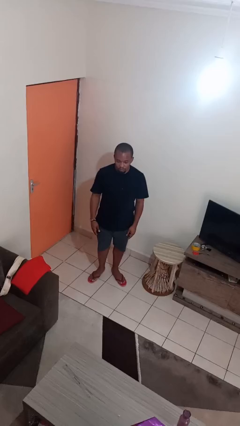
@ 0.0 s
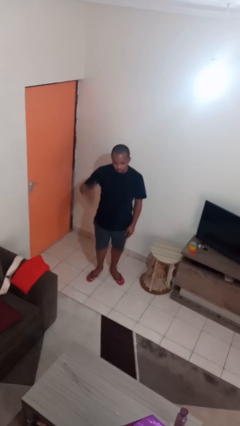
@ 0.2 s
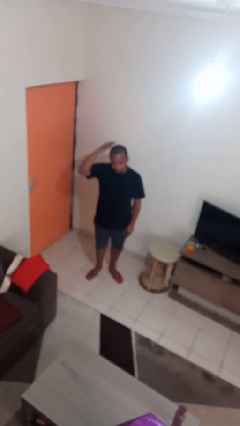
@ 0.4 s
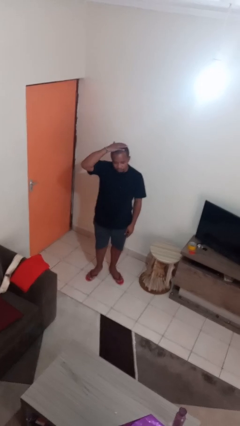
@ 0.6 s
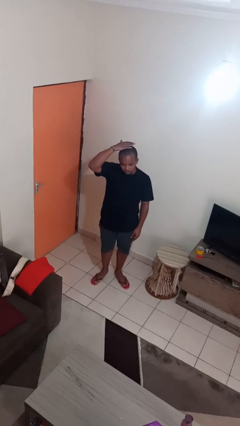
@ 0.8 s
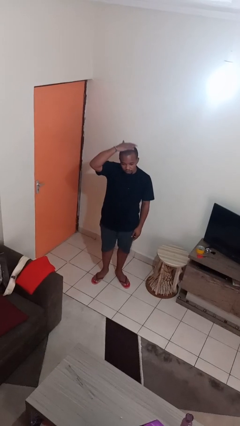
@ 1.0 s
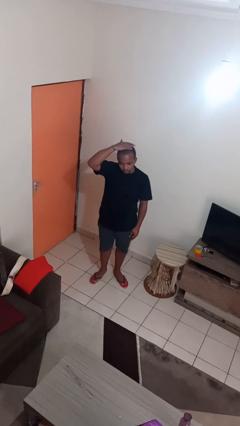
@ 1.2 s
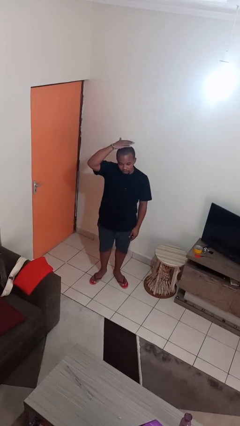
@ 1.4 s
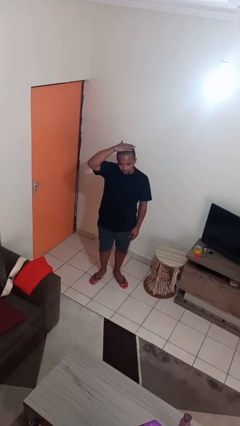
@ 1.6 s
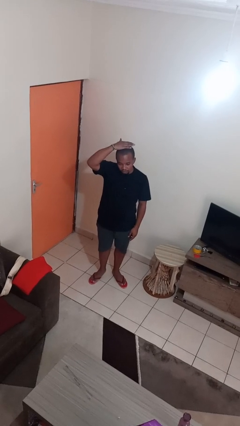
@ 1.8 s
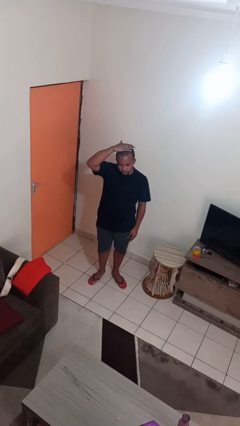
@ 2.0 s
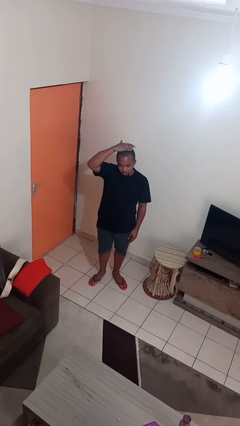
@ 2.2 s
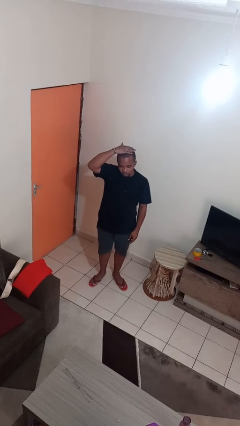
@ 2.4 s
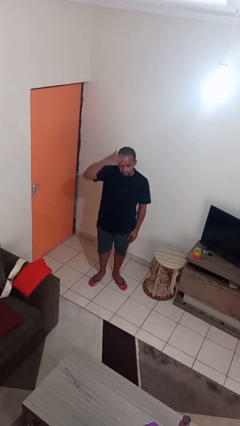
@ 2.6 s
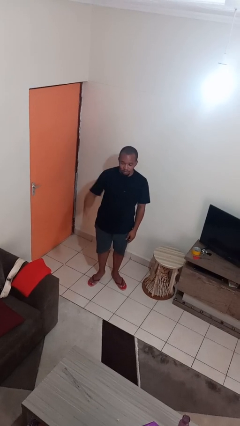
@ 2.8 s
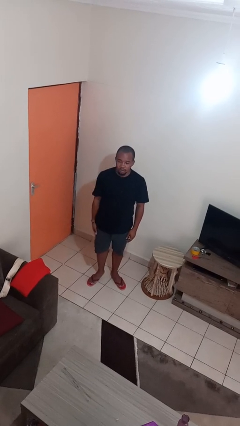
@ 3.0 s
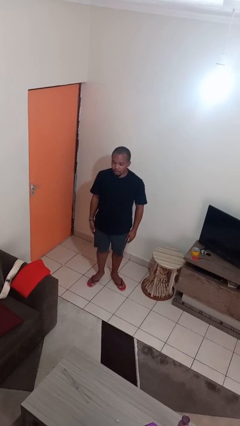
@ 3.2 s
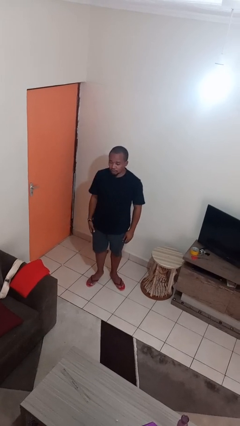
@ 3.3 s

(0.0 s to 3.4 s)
person pats head

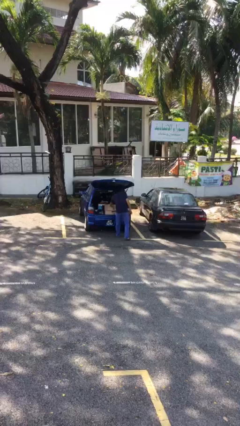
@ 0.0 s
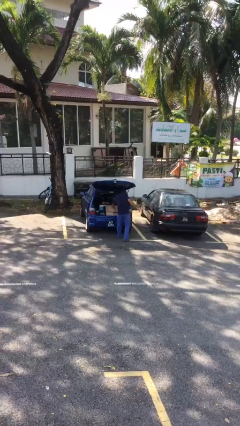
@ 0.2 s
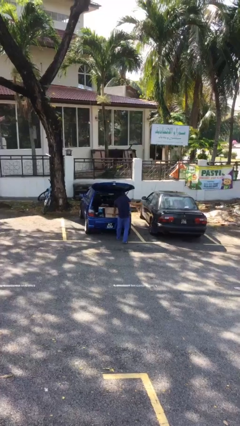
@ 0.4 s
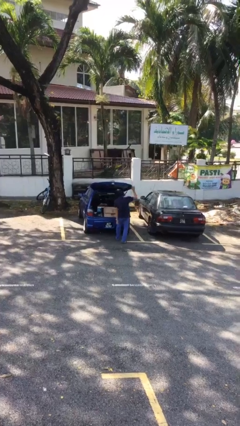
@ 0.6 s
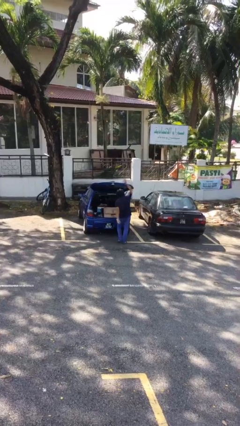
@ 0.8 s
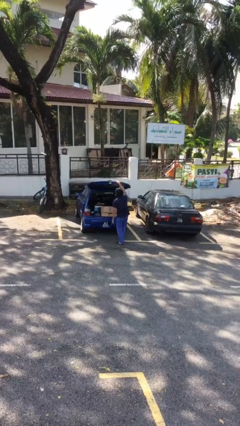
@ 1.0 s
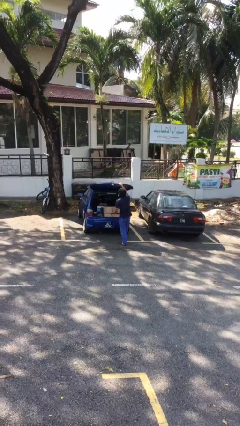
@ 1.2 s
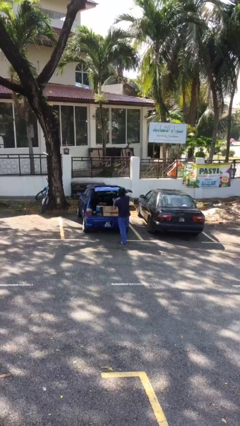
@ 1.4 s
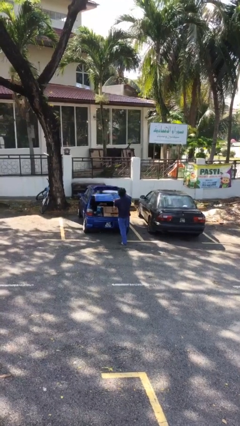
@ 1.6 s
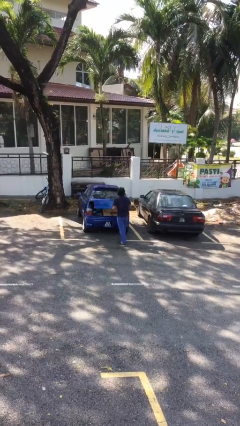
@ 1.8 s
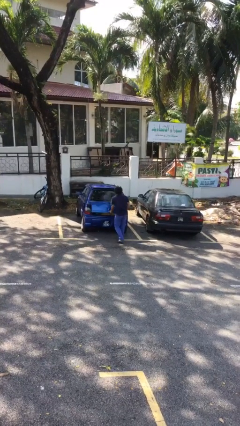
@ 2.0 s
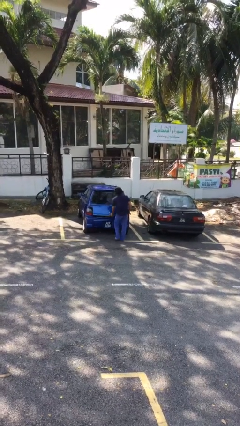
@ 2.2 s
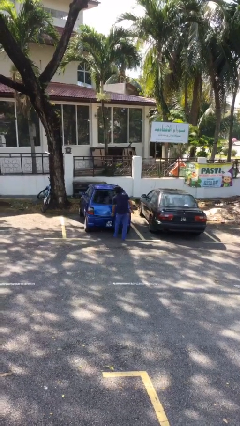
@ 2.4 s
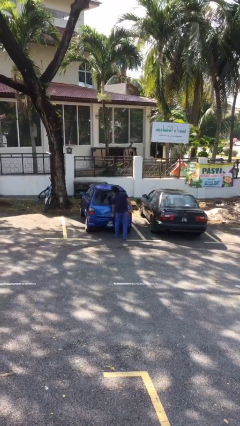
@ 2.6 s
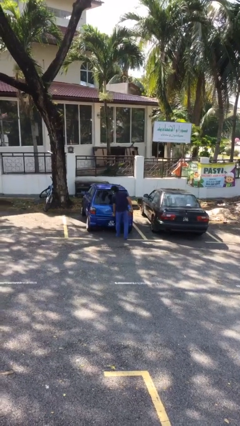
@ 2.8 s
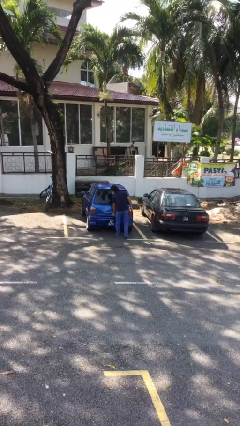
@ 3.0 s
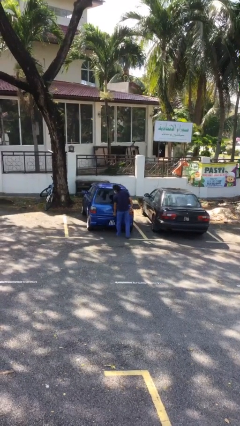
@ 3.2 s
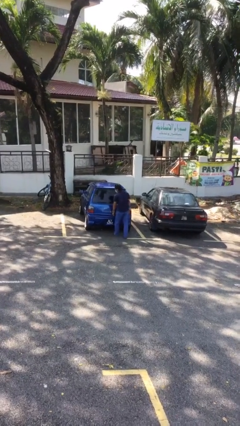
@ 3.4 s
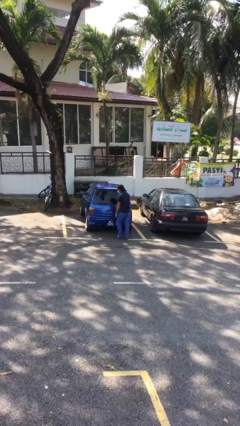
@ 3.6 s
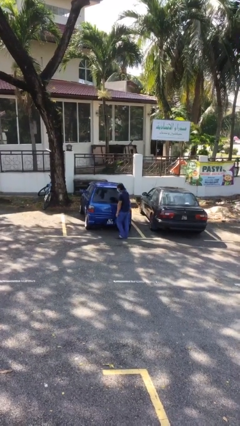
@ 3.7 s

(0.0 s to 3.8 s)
person closes car trunk

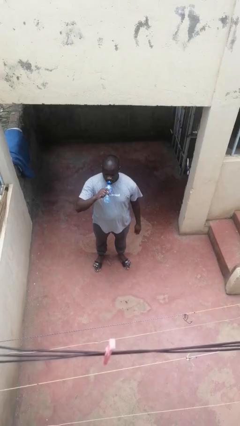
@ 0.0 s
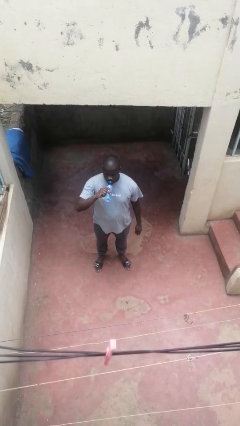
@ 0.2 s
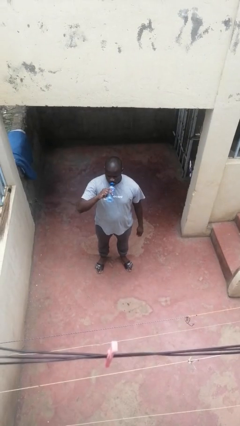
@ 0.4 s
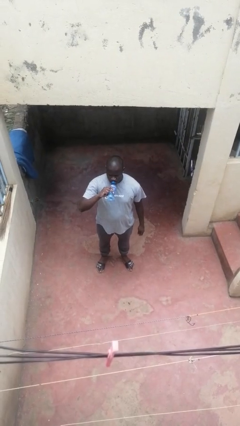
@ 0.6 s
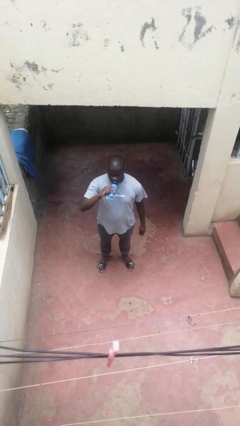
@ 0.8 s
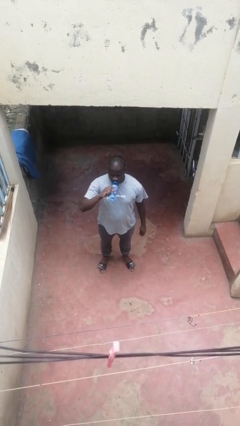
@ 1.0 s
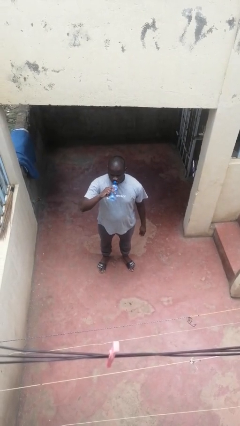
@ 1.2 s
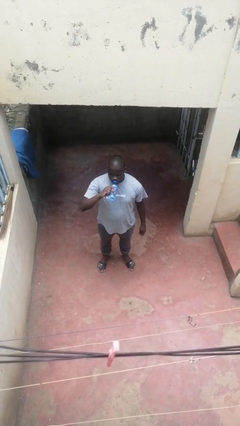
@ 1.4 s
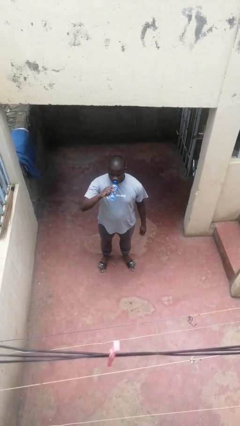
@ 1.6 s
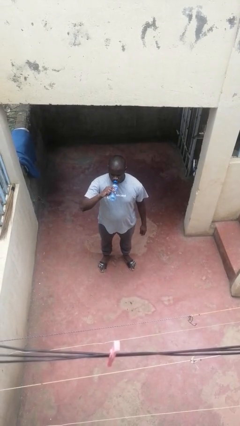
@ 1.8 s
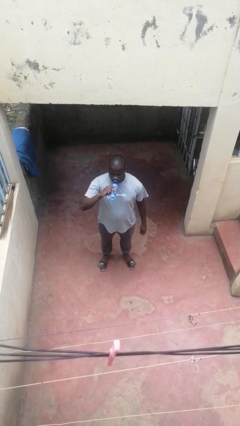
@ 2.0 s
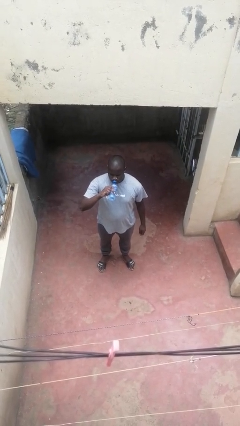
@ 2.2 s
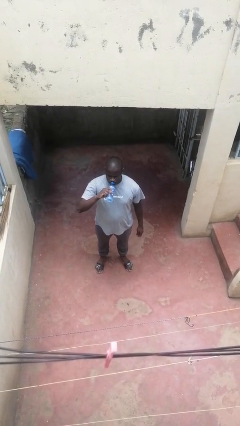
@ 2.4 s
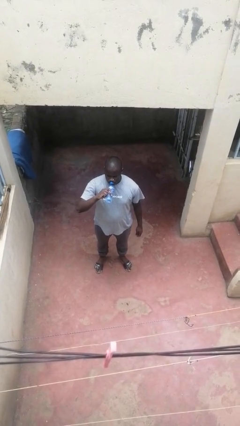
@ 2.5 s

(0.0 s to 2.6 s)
person drinks from bottle

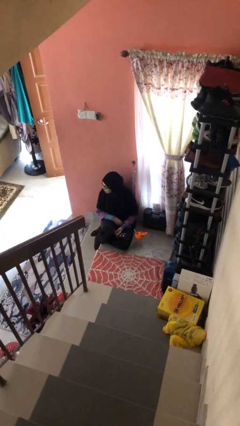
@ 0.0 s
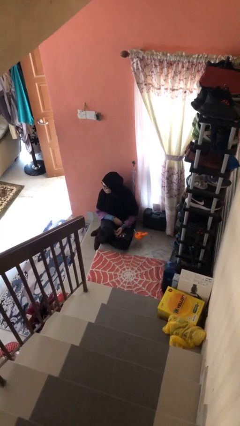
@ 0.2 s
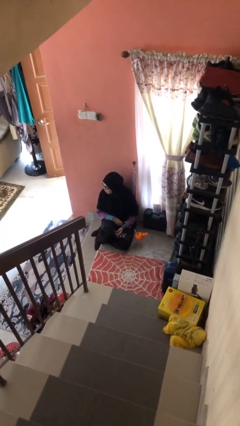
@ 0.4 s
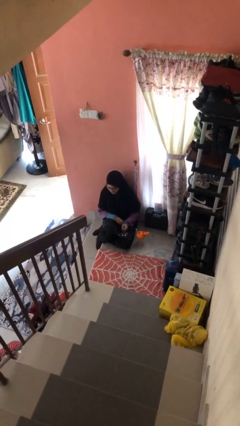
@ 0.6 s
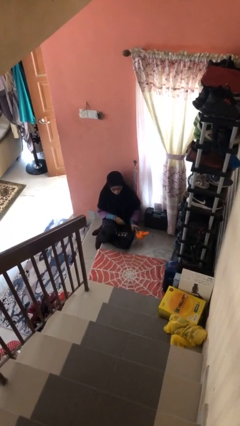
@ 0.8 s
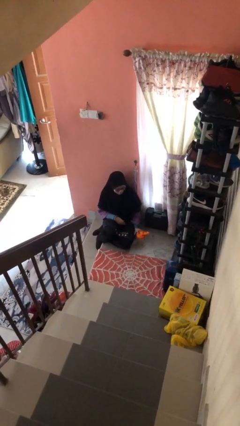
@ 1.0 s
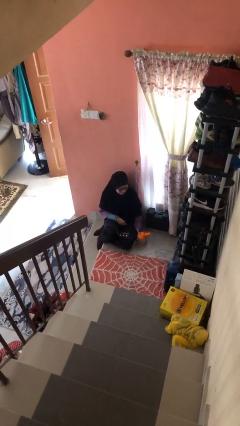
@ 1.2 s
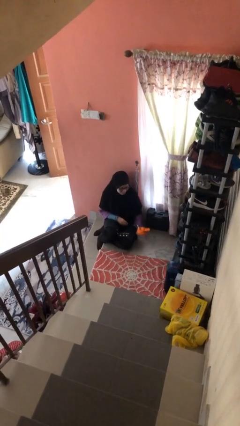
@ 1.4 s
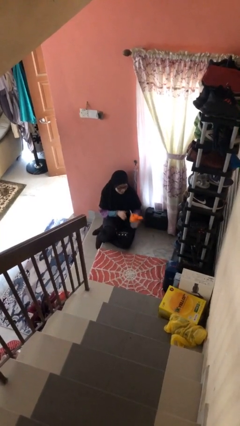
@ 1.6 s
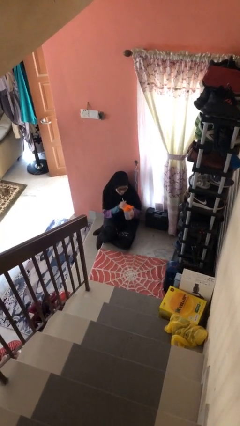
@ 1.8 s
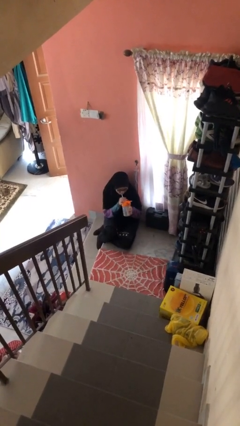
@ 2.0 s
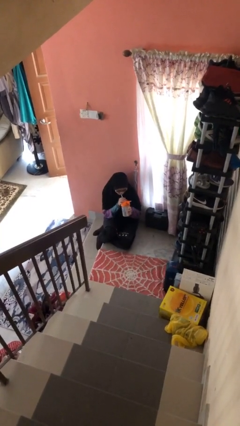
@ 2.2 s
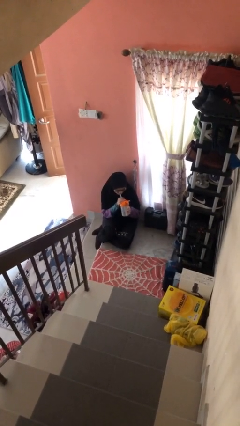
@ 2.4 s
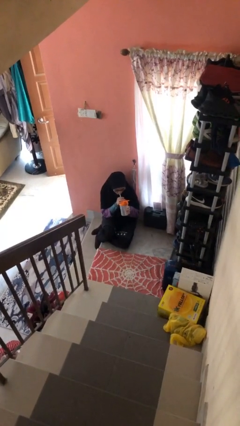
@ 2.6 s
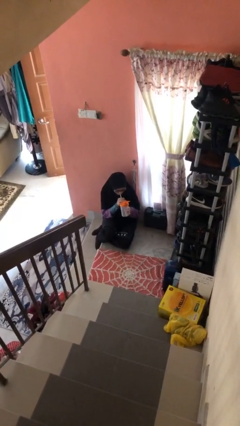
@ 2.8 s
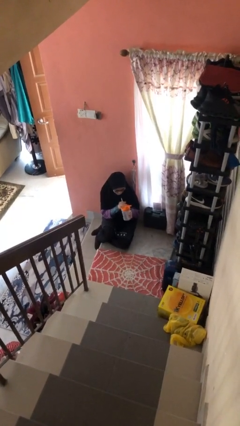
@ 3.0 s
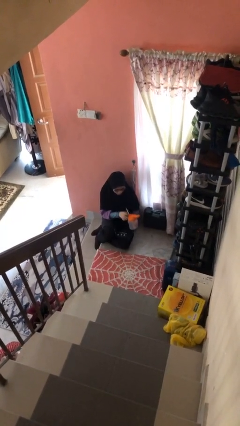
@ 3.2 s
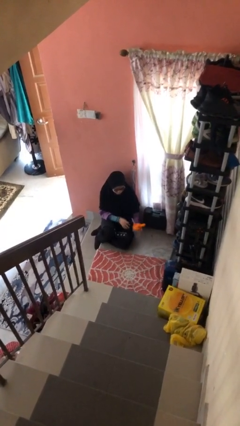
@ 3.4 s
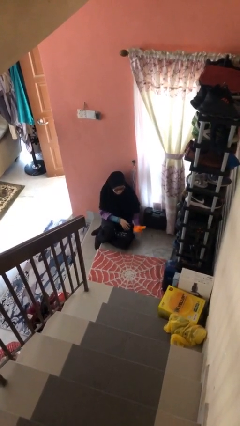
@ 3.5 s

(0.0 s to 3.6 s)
person drinks from straw

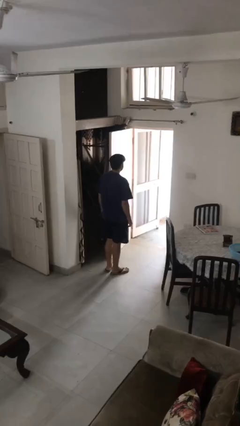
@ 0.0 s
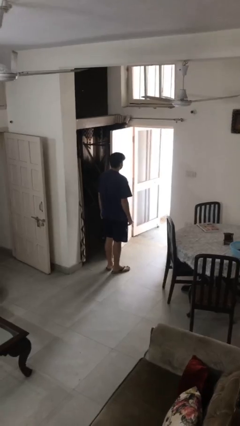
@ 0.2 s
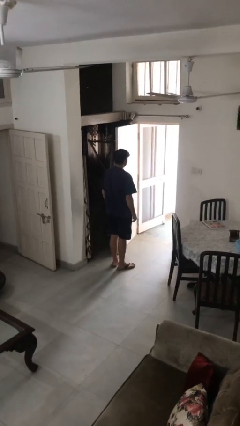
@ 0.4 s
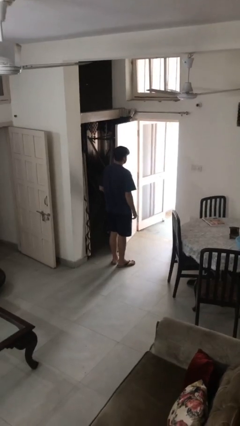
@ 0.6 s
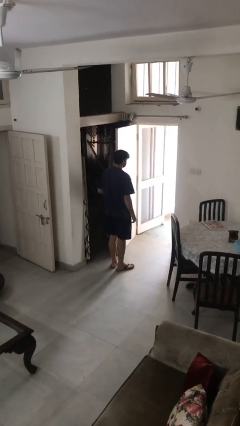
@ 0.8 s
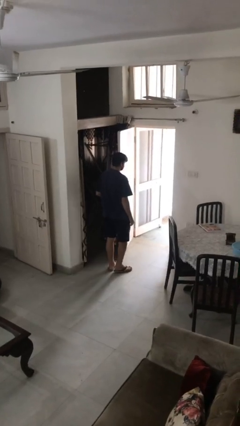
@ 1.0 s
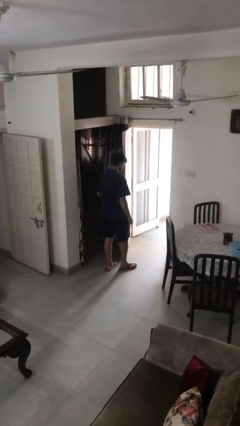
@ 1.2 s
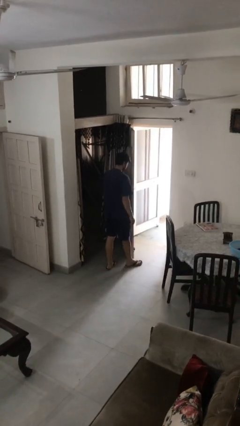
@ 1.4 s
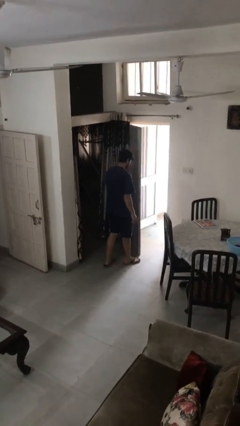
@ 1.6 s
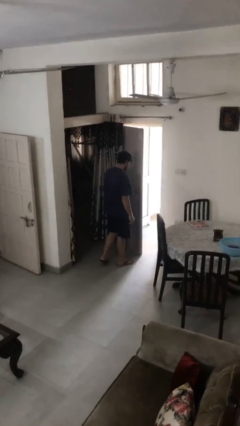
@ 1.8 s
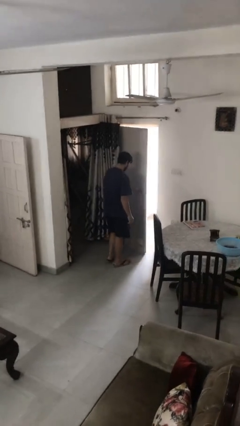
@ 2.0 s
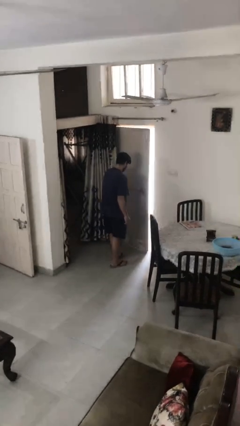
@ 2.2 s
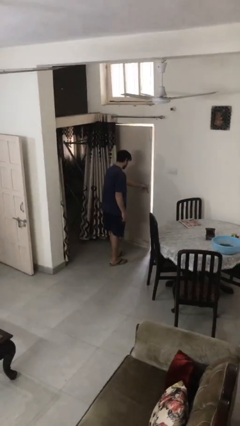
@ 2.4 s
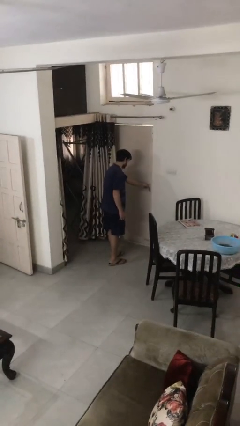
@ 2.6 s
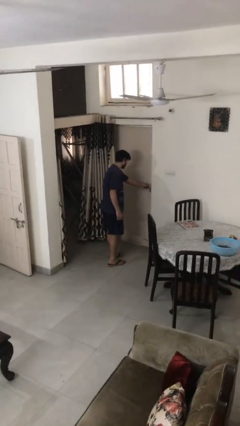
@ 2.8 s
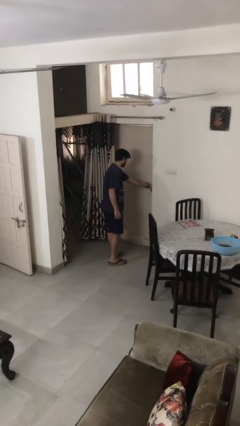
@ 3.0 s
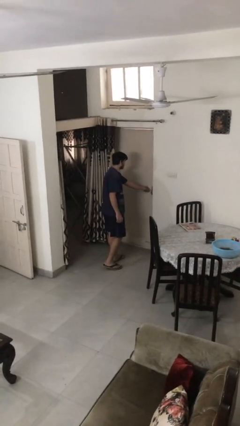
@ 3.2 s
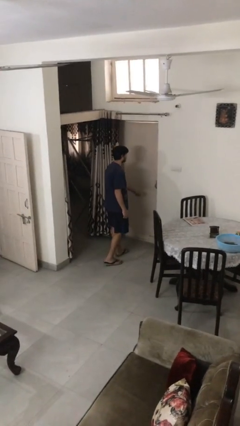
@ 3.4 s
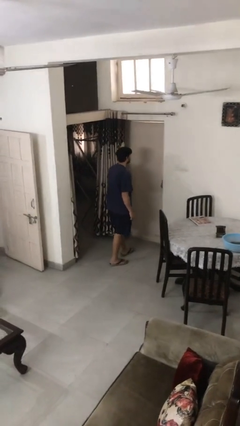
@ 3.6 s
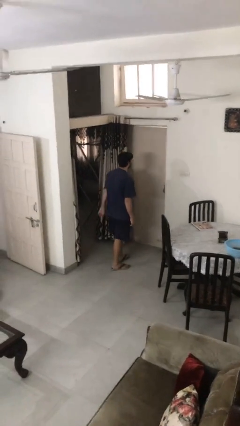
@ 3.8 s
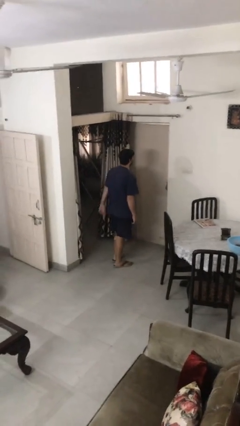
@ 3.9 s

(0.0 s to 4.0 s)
person closes facility door
